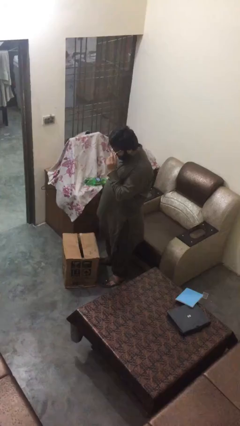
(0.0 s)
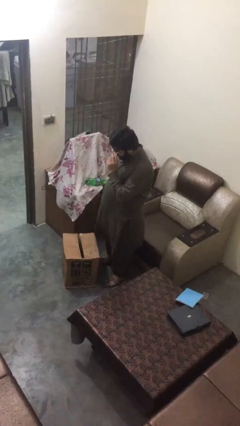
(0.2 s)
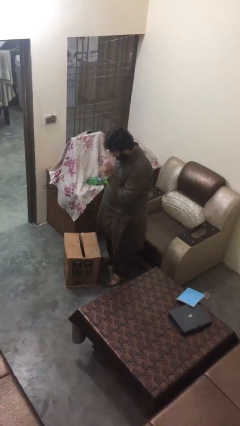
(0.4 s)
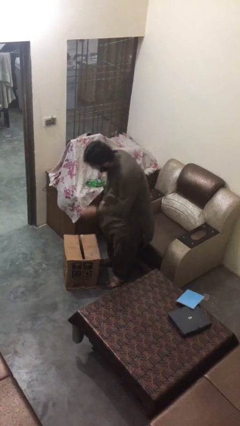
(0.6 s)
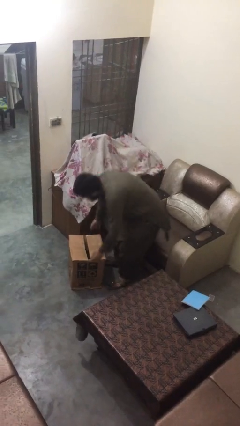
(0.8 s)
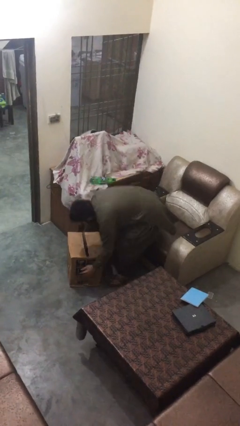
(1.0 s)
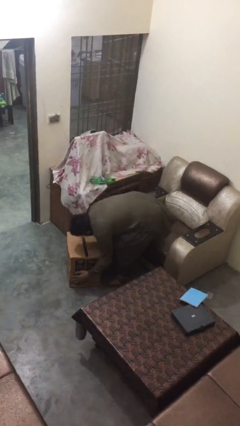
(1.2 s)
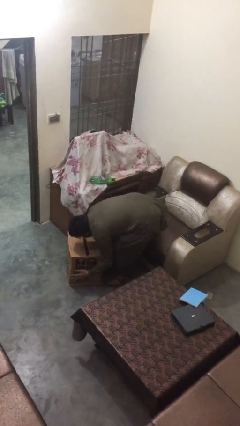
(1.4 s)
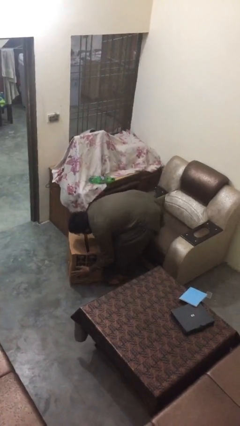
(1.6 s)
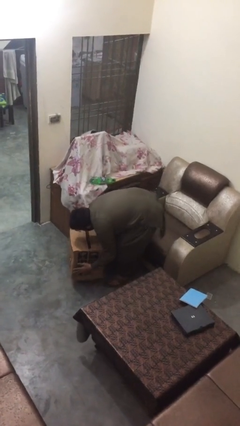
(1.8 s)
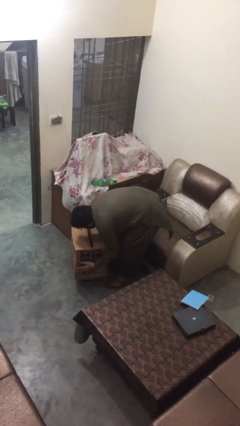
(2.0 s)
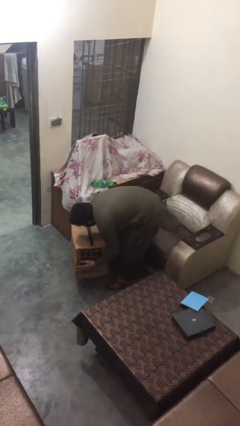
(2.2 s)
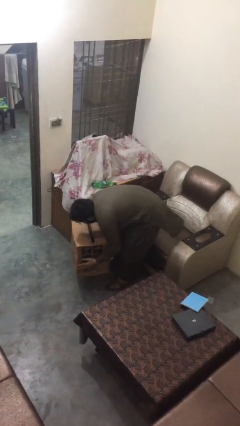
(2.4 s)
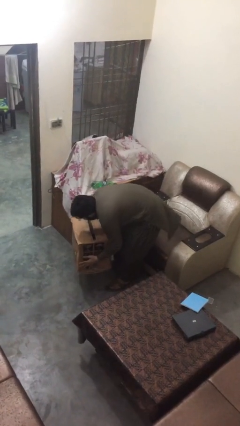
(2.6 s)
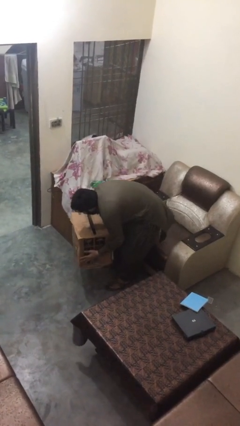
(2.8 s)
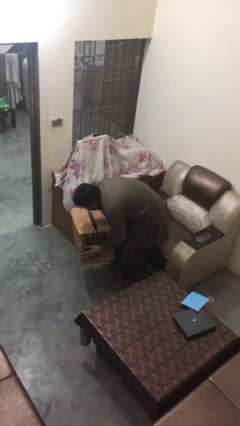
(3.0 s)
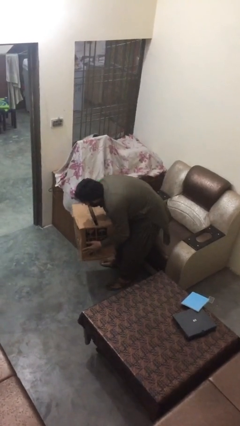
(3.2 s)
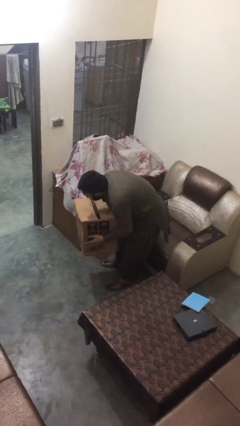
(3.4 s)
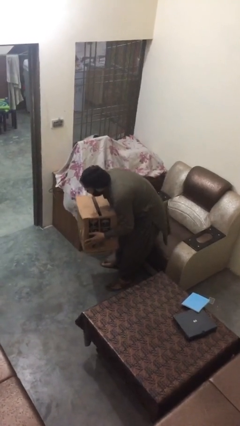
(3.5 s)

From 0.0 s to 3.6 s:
person picks up object from floor

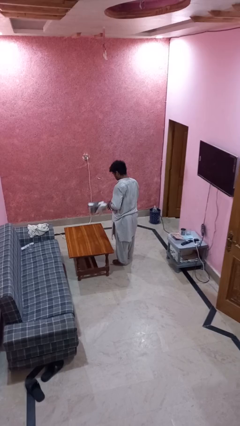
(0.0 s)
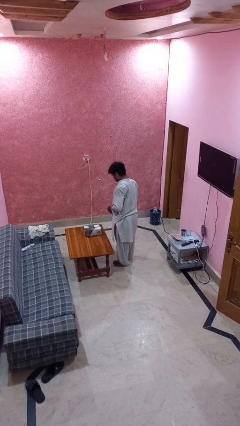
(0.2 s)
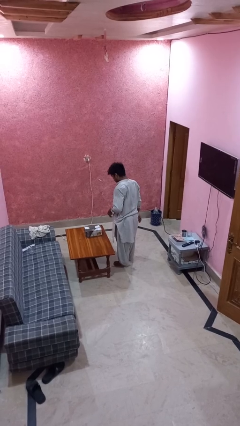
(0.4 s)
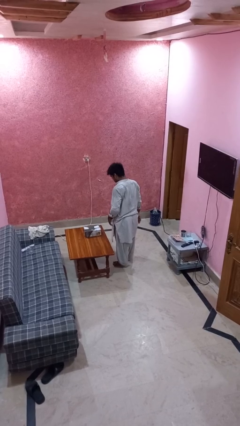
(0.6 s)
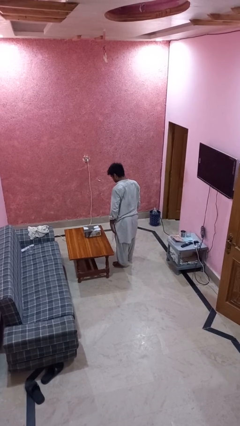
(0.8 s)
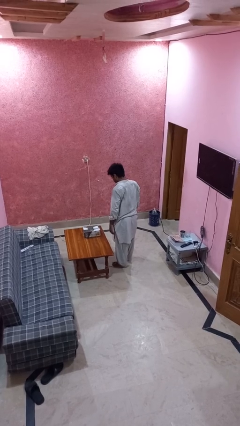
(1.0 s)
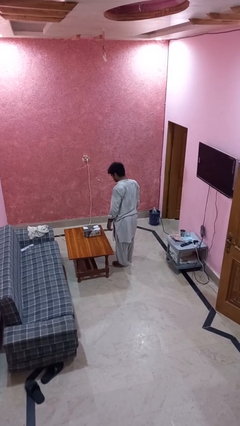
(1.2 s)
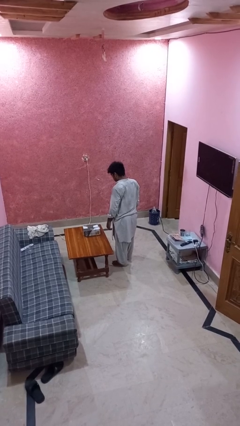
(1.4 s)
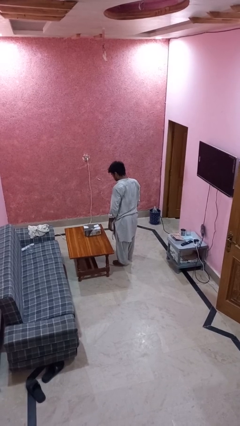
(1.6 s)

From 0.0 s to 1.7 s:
person throws object on table

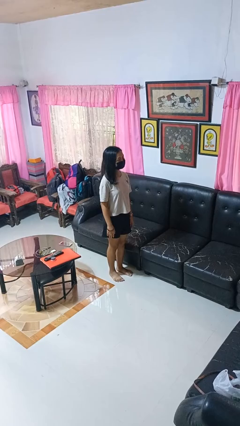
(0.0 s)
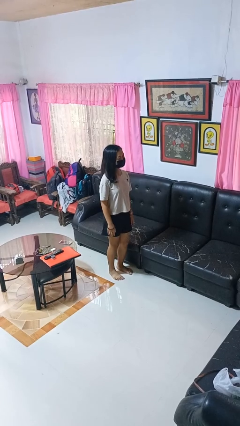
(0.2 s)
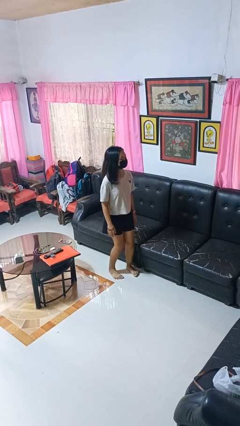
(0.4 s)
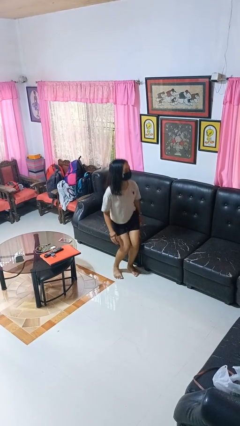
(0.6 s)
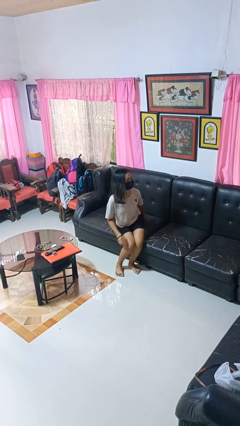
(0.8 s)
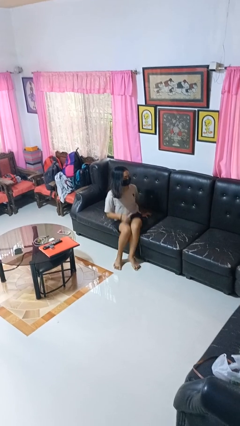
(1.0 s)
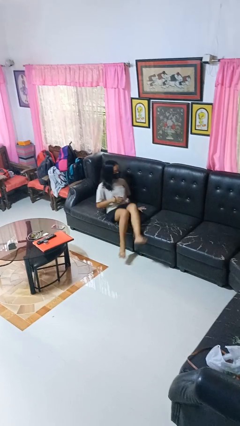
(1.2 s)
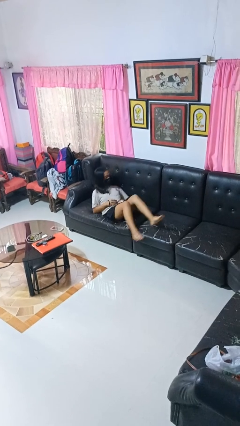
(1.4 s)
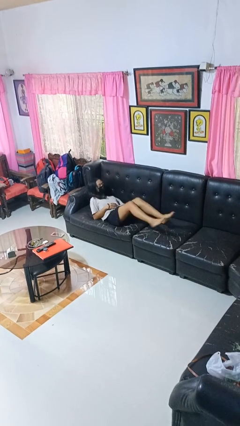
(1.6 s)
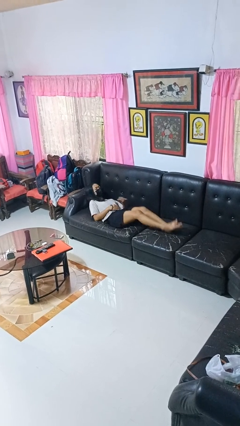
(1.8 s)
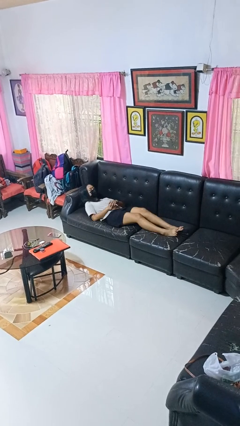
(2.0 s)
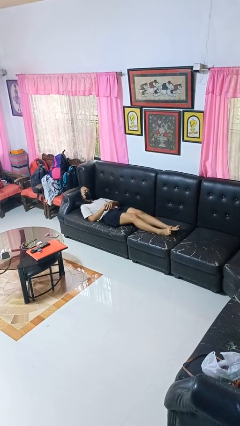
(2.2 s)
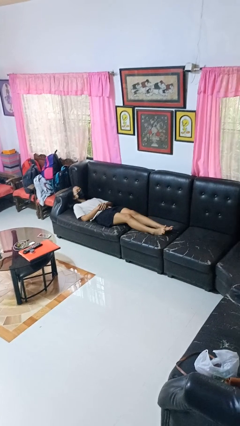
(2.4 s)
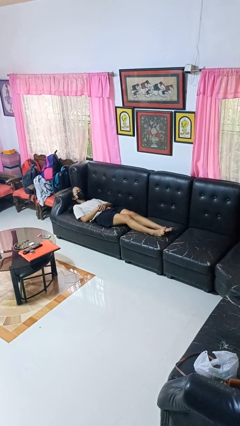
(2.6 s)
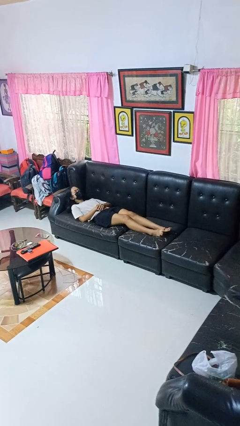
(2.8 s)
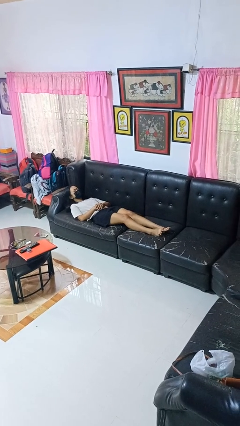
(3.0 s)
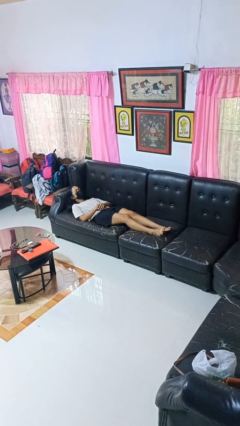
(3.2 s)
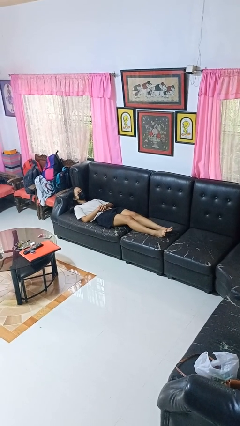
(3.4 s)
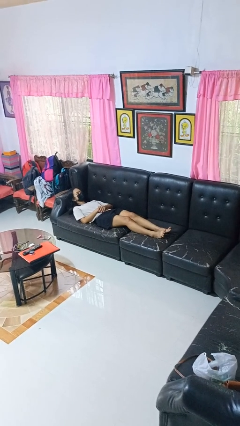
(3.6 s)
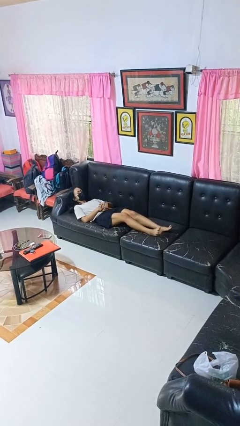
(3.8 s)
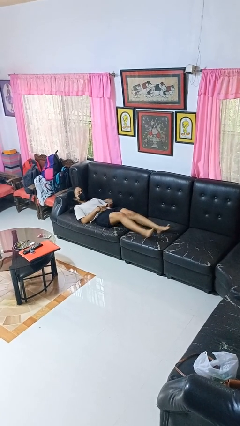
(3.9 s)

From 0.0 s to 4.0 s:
person lies down on couch

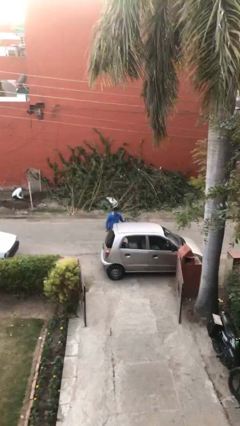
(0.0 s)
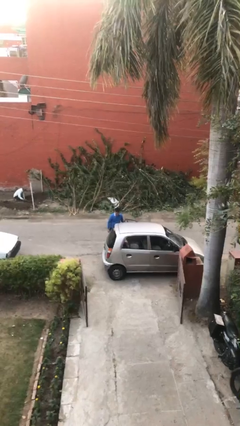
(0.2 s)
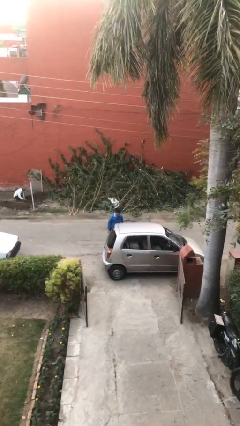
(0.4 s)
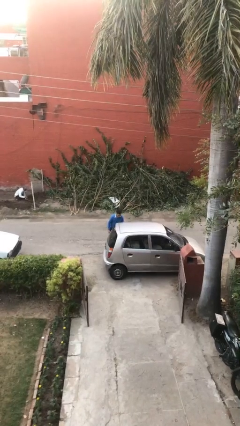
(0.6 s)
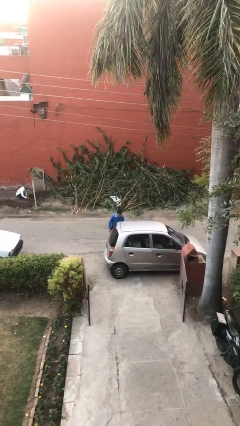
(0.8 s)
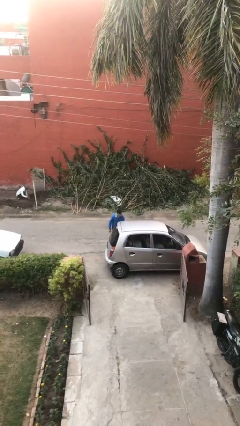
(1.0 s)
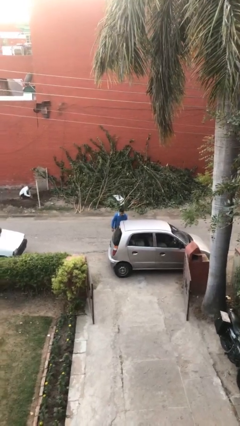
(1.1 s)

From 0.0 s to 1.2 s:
person closes car door

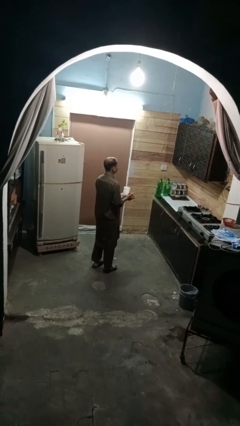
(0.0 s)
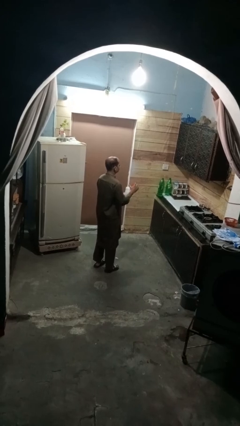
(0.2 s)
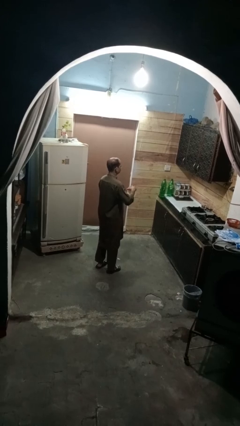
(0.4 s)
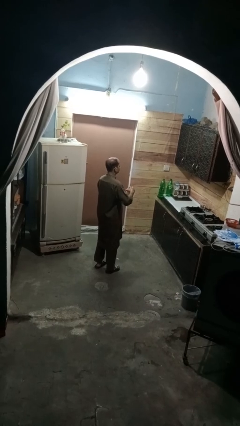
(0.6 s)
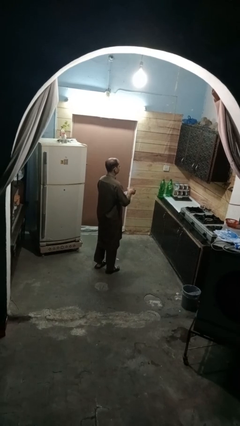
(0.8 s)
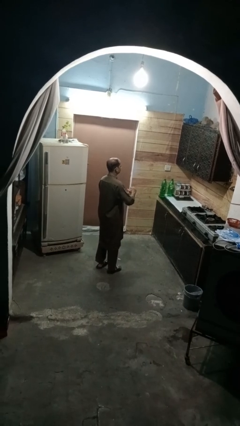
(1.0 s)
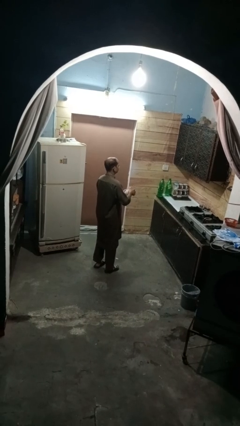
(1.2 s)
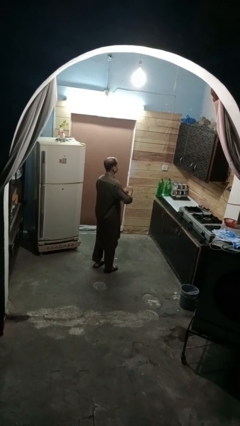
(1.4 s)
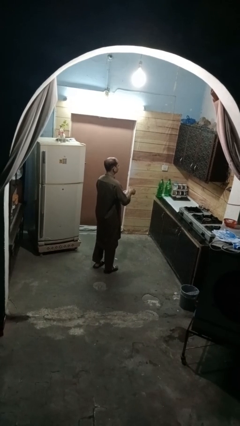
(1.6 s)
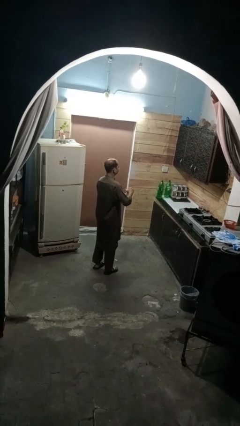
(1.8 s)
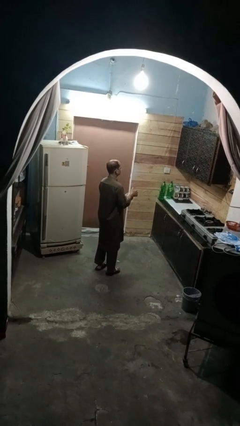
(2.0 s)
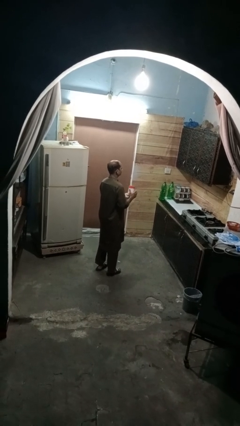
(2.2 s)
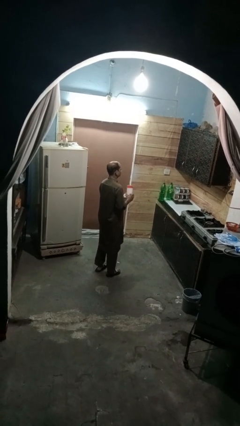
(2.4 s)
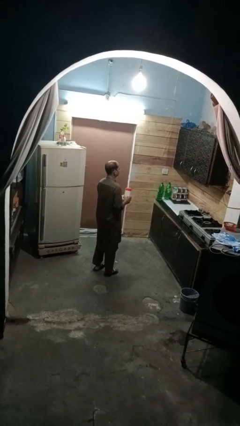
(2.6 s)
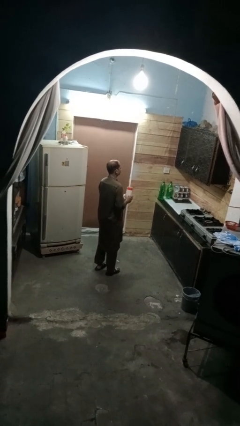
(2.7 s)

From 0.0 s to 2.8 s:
person closes jar

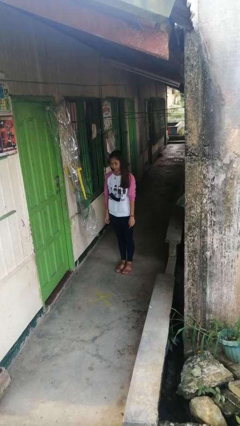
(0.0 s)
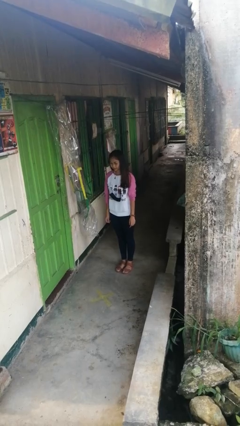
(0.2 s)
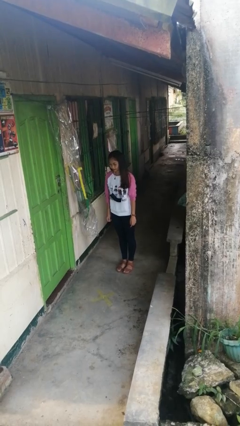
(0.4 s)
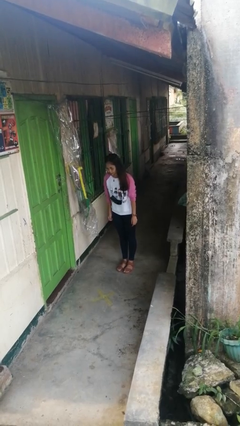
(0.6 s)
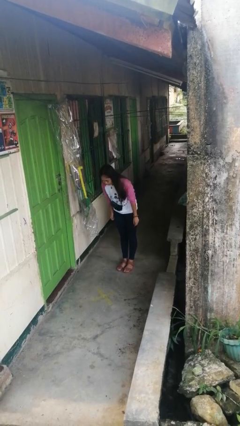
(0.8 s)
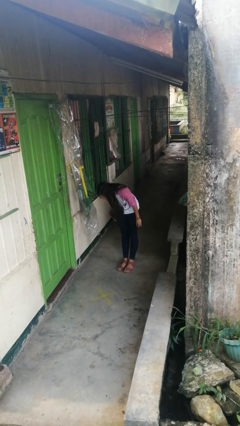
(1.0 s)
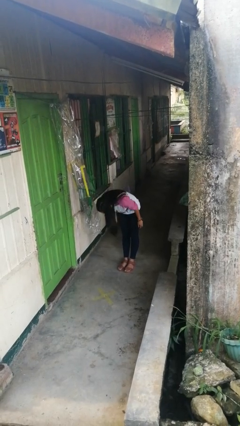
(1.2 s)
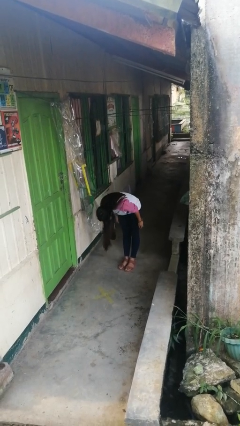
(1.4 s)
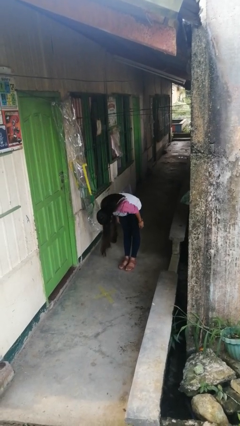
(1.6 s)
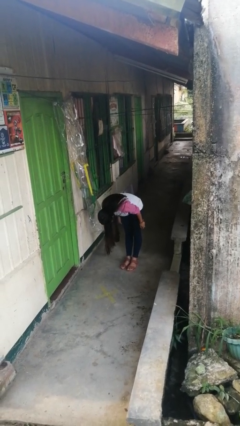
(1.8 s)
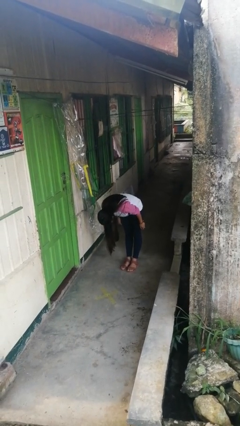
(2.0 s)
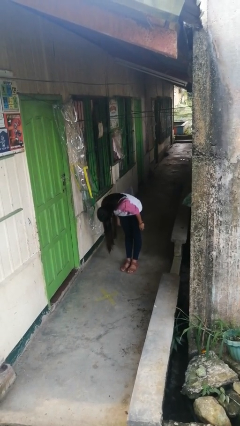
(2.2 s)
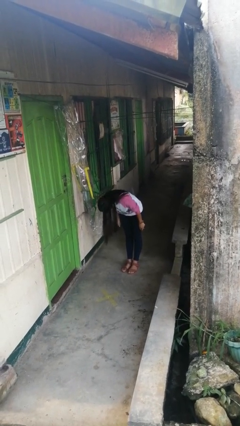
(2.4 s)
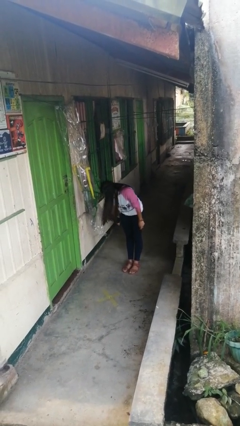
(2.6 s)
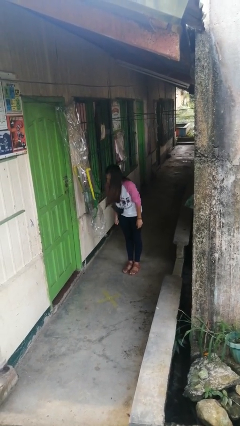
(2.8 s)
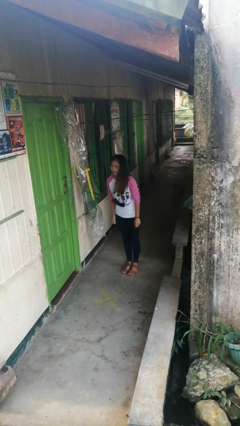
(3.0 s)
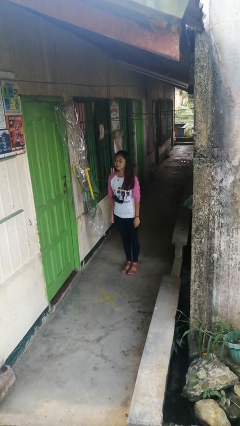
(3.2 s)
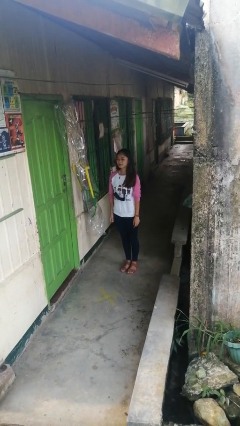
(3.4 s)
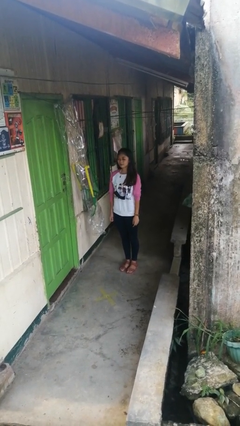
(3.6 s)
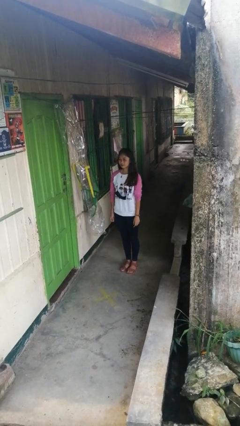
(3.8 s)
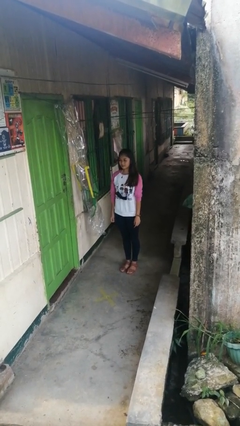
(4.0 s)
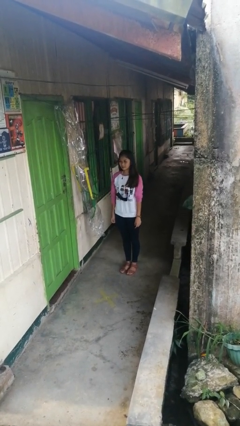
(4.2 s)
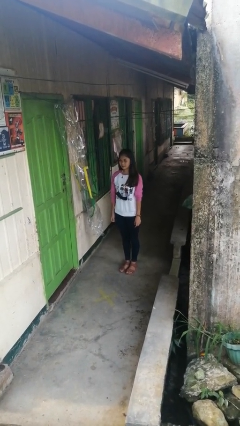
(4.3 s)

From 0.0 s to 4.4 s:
person bows
